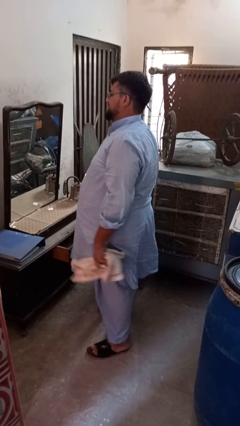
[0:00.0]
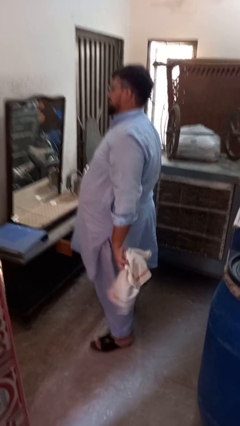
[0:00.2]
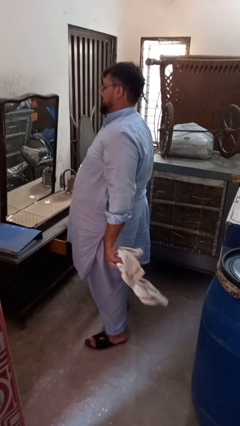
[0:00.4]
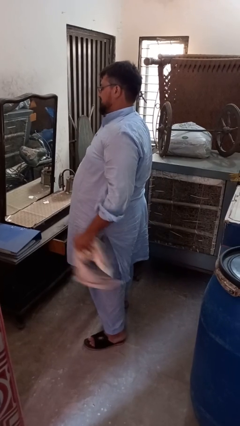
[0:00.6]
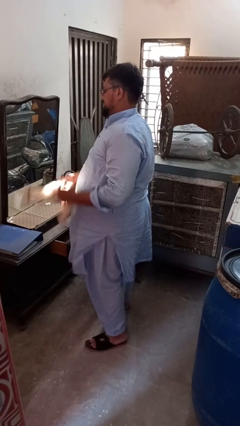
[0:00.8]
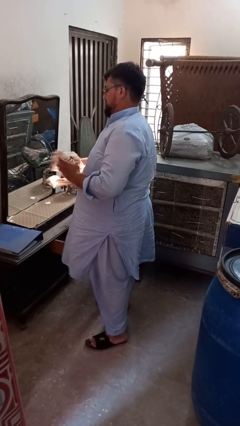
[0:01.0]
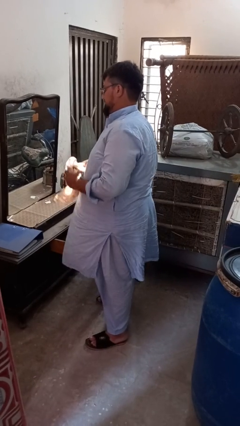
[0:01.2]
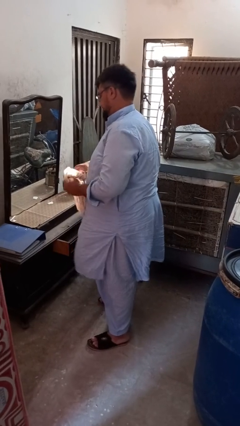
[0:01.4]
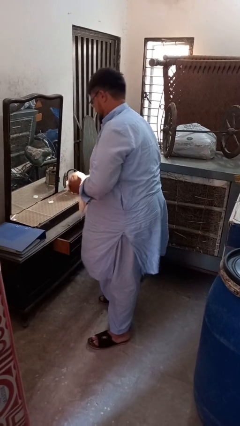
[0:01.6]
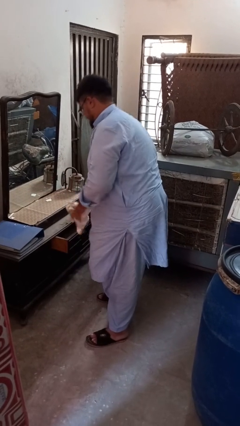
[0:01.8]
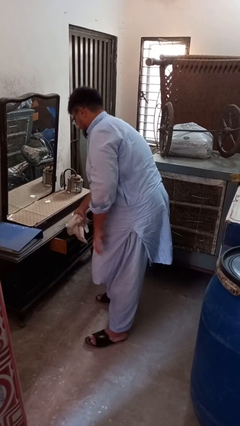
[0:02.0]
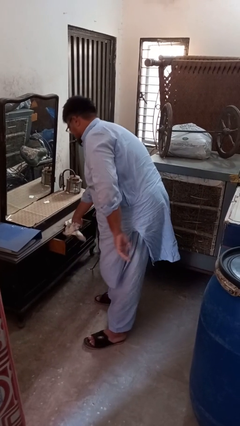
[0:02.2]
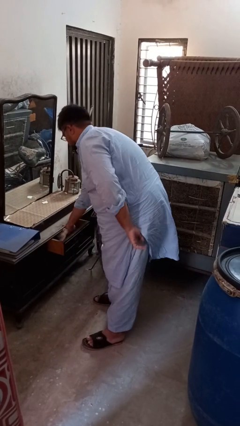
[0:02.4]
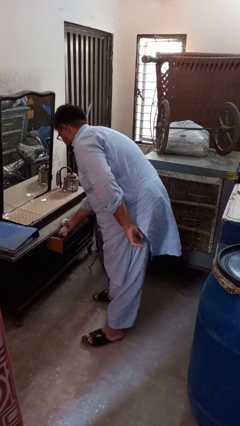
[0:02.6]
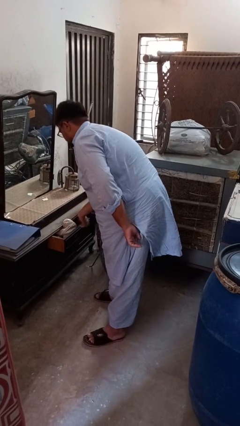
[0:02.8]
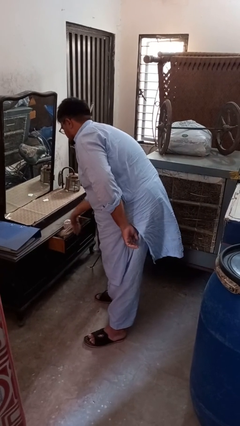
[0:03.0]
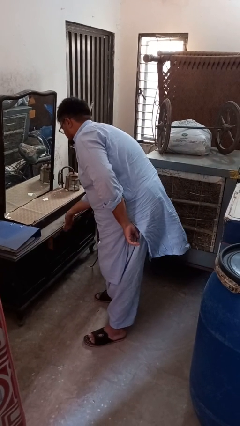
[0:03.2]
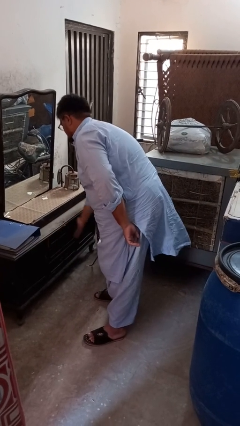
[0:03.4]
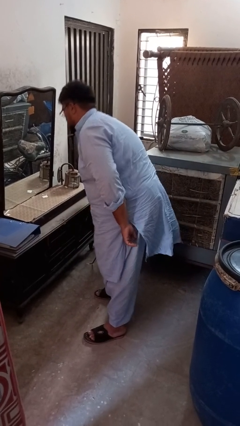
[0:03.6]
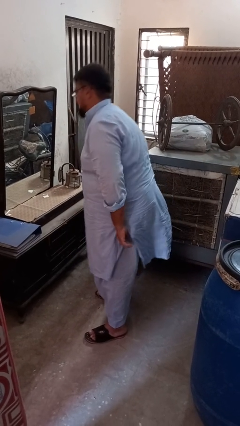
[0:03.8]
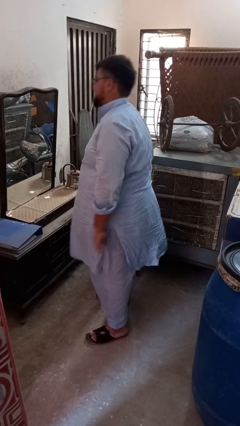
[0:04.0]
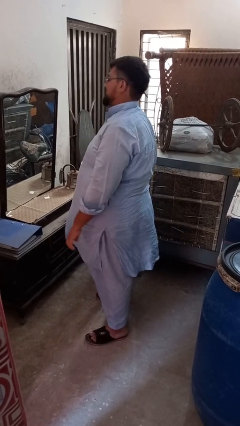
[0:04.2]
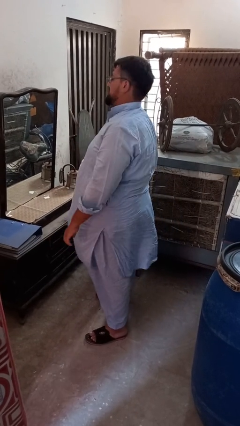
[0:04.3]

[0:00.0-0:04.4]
person puts clothes into dresser

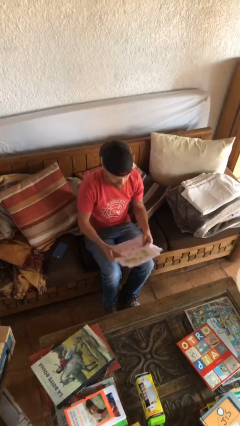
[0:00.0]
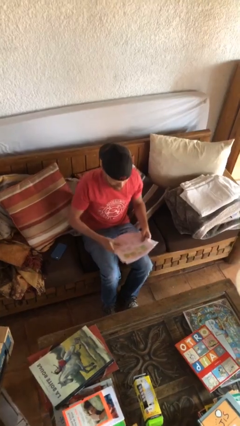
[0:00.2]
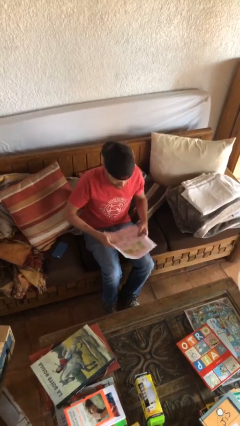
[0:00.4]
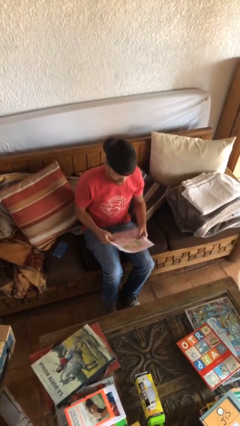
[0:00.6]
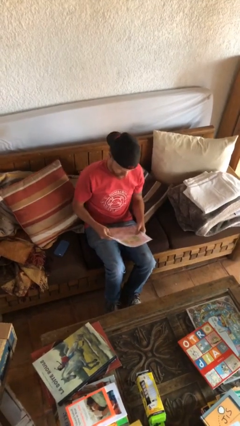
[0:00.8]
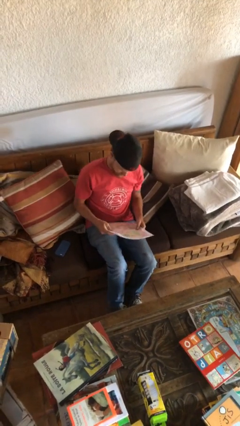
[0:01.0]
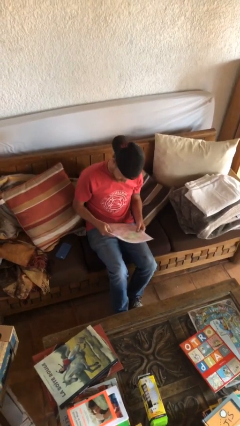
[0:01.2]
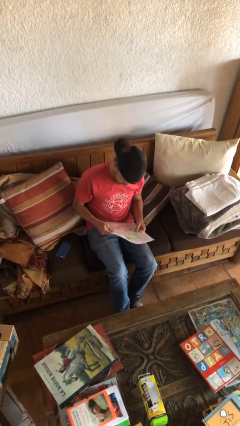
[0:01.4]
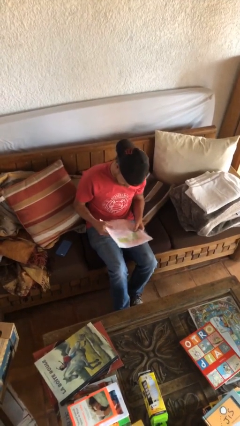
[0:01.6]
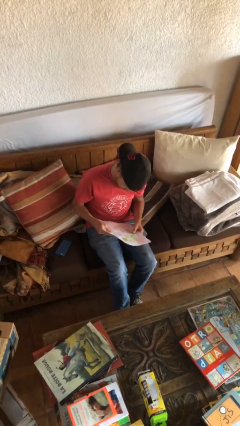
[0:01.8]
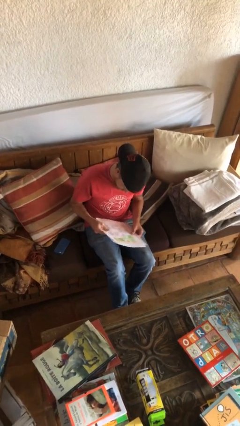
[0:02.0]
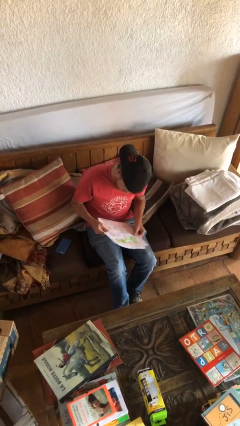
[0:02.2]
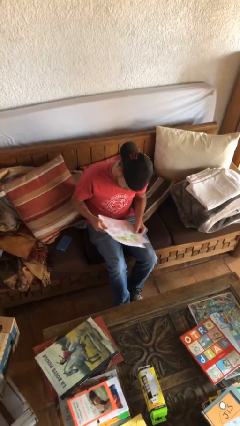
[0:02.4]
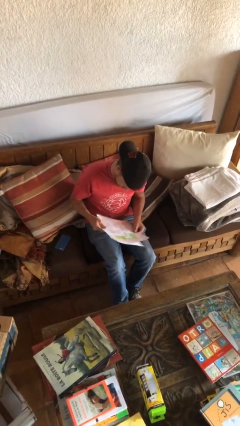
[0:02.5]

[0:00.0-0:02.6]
person reads document

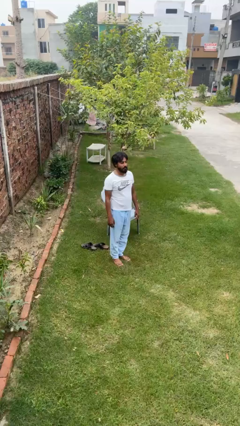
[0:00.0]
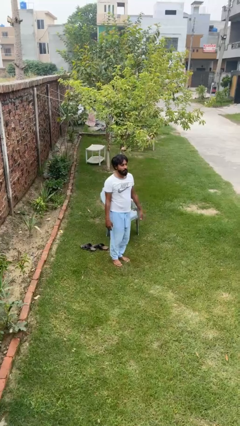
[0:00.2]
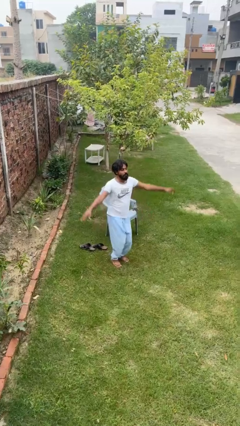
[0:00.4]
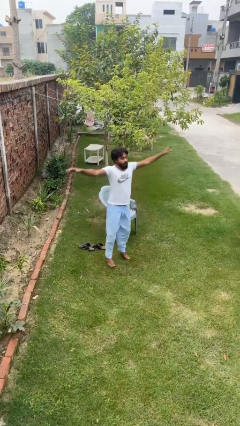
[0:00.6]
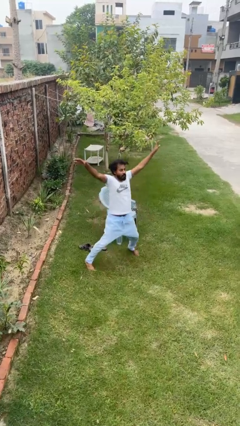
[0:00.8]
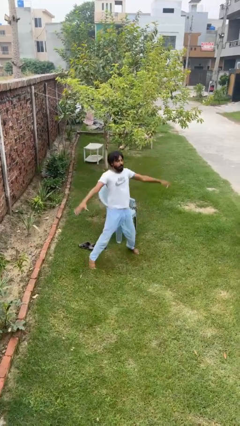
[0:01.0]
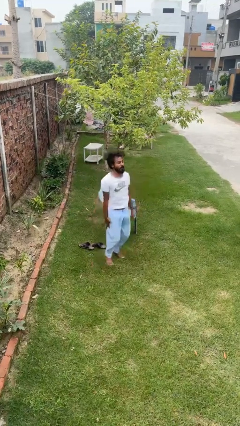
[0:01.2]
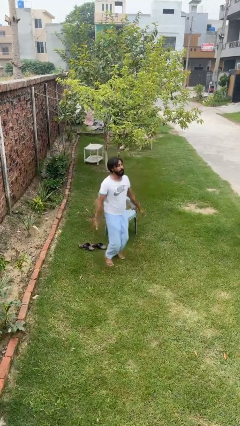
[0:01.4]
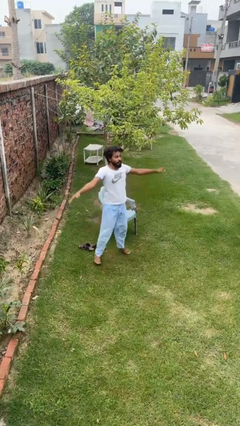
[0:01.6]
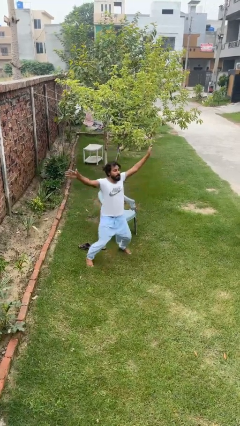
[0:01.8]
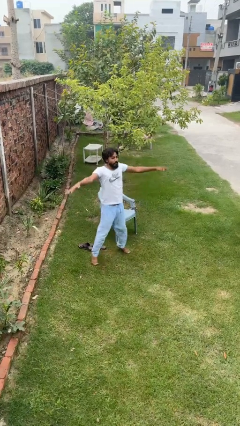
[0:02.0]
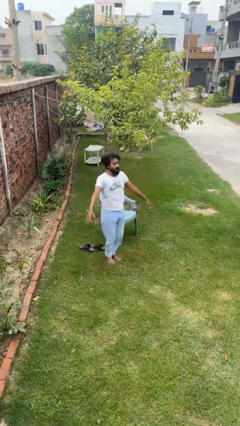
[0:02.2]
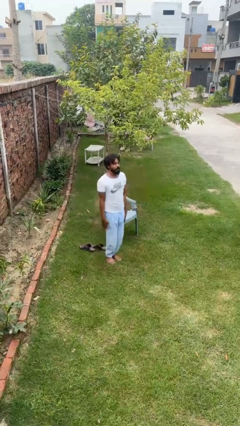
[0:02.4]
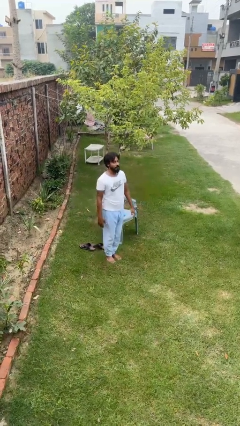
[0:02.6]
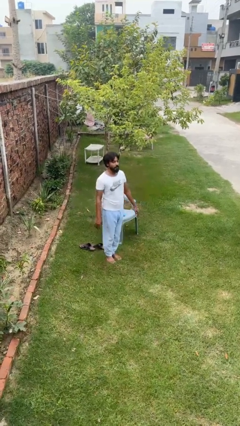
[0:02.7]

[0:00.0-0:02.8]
person exercises with jumping jacks

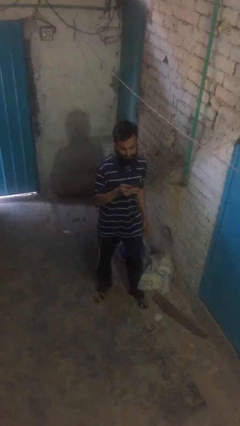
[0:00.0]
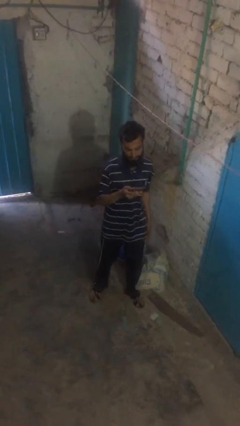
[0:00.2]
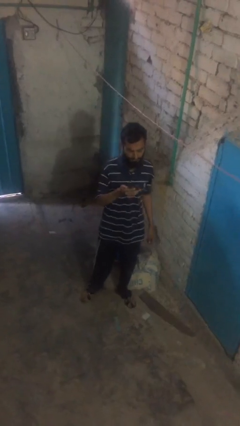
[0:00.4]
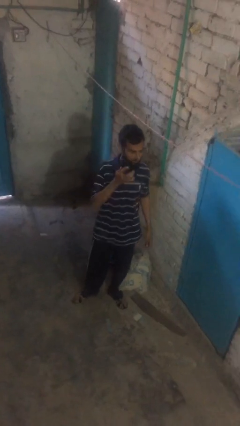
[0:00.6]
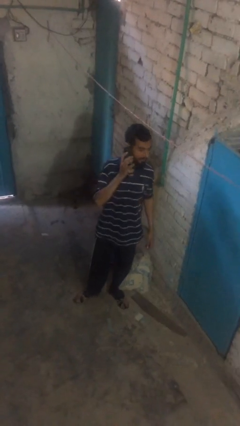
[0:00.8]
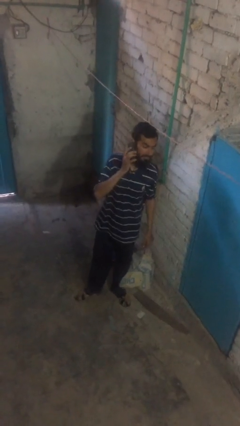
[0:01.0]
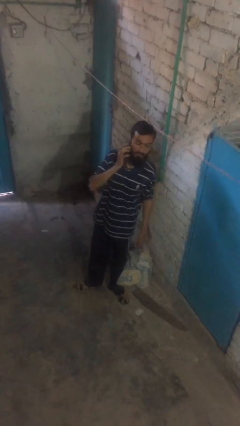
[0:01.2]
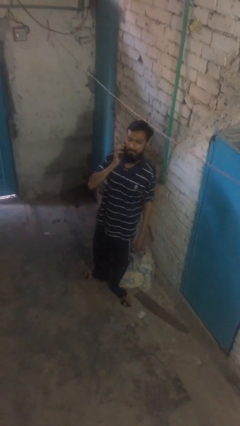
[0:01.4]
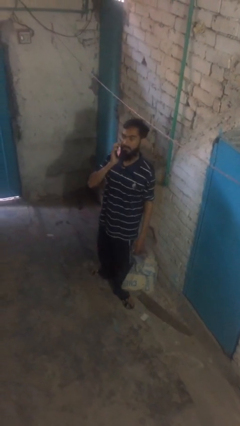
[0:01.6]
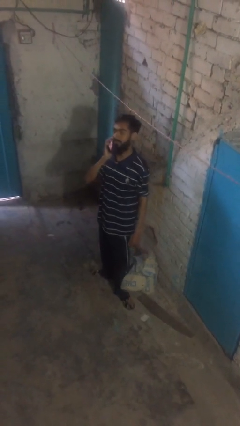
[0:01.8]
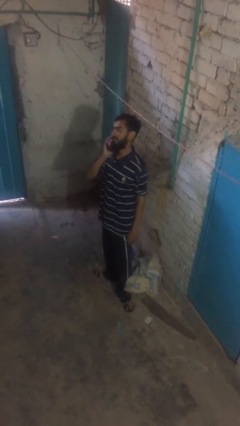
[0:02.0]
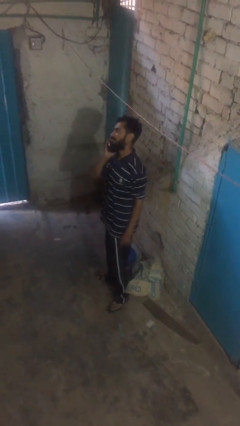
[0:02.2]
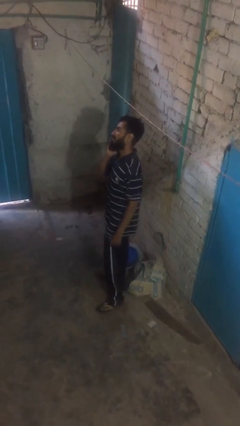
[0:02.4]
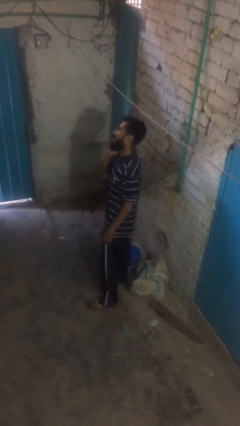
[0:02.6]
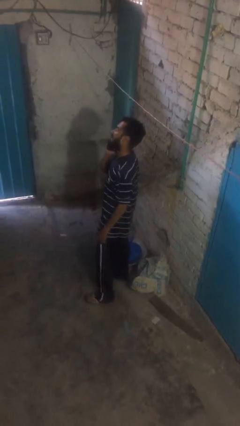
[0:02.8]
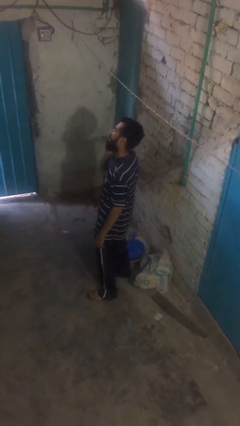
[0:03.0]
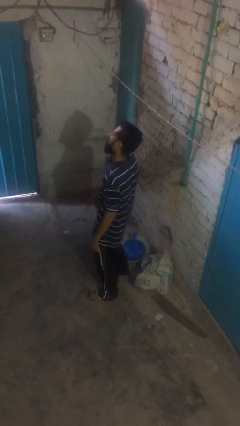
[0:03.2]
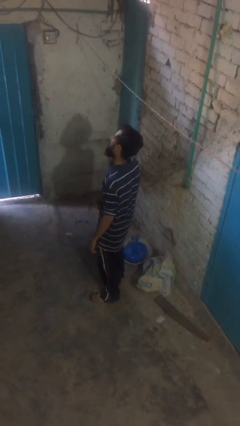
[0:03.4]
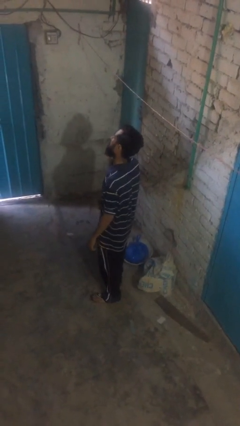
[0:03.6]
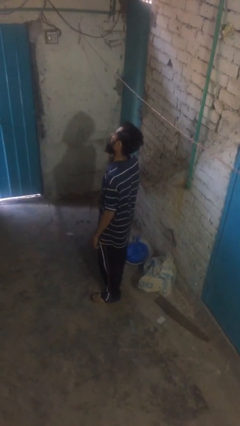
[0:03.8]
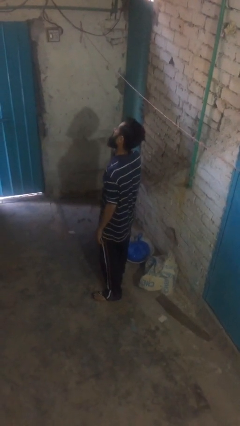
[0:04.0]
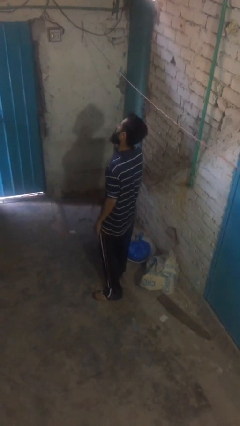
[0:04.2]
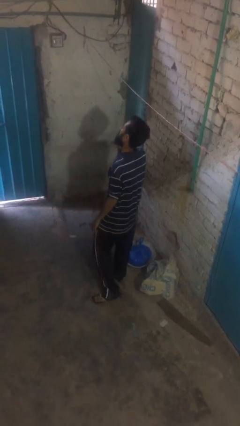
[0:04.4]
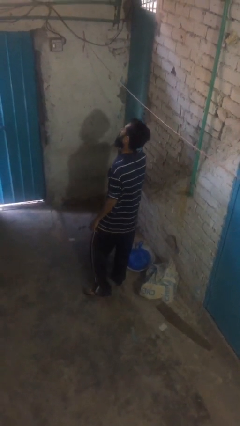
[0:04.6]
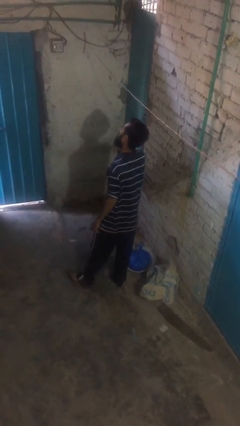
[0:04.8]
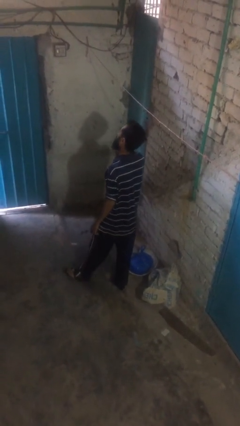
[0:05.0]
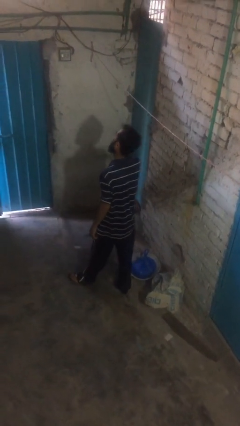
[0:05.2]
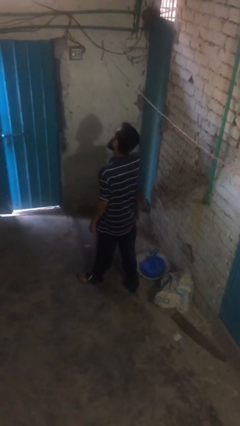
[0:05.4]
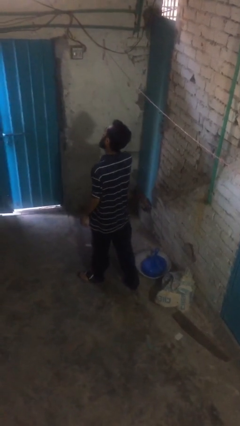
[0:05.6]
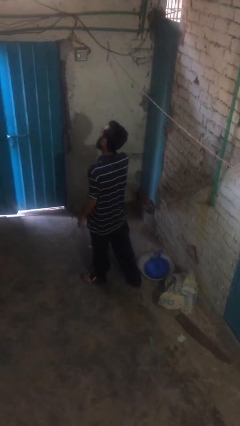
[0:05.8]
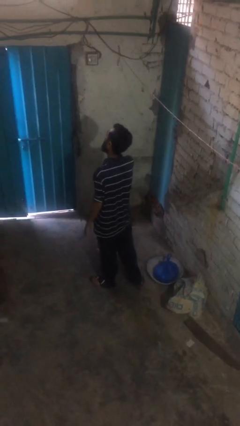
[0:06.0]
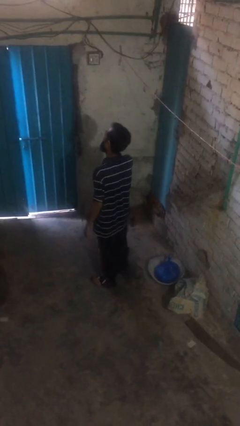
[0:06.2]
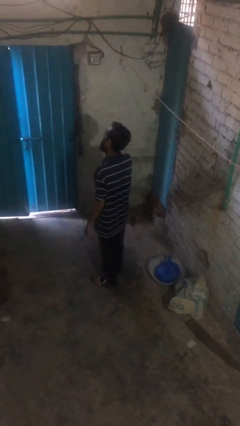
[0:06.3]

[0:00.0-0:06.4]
person talks on phone

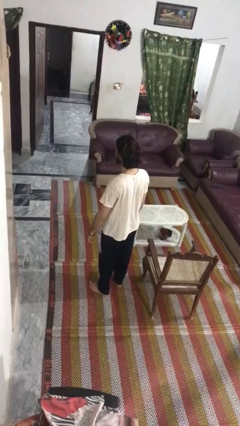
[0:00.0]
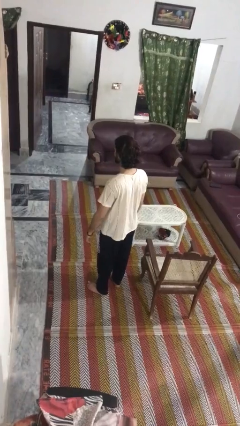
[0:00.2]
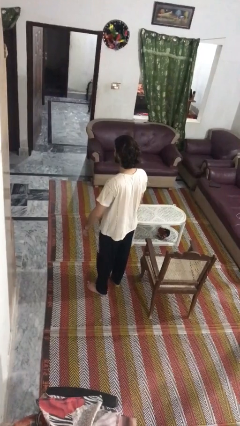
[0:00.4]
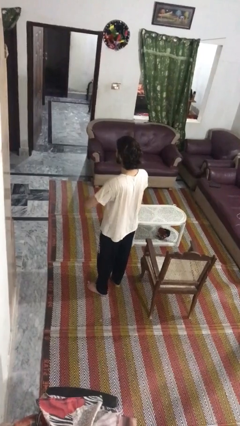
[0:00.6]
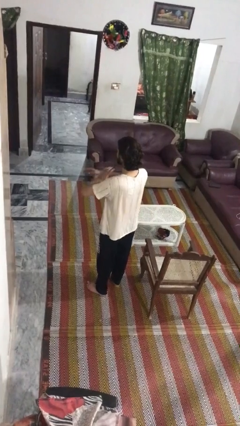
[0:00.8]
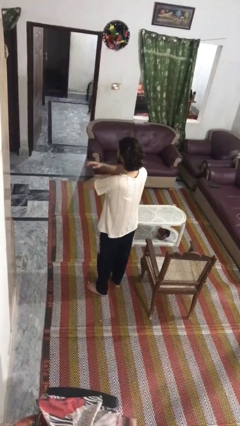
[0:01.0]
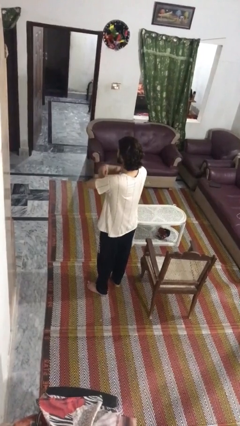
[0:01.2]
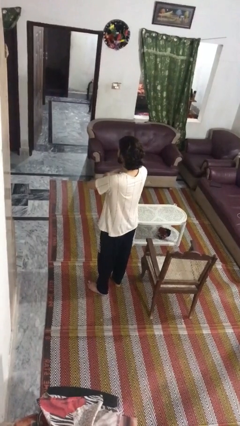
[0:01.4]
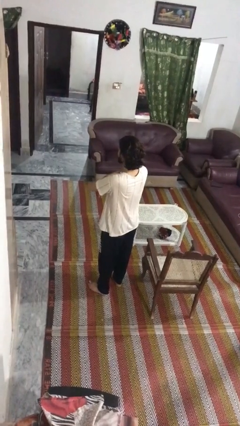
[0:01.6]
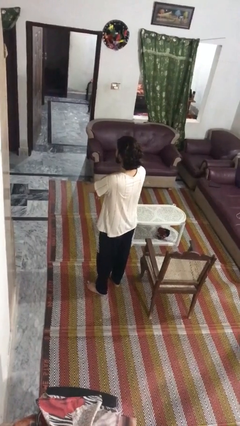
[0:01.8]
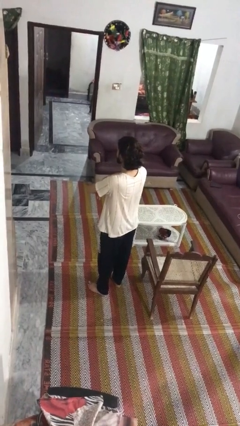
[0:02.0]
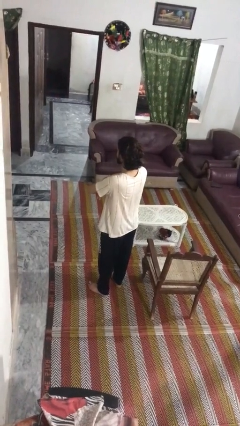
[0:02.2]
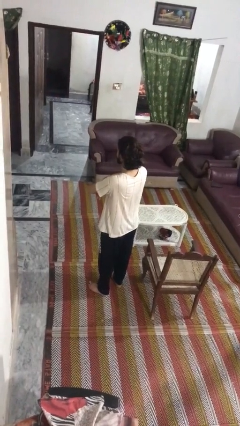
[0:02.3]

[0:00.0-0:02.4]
person crosses arms
